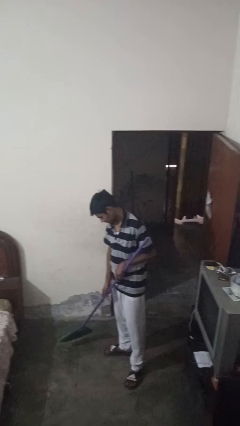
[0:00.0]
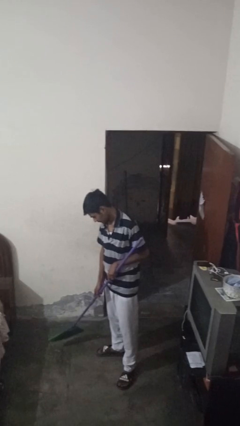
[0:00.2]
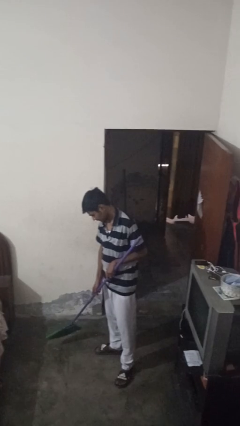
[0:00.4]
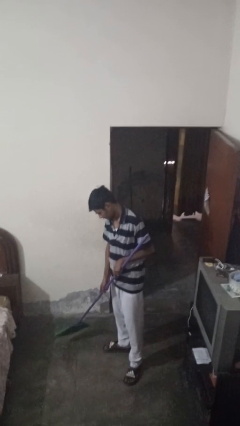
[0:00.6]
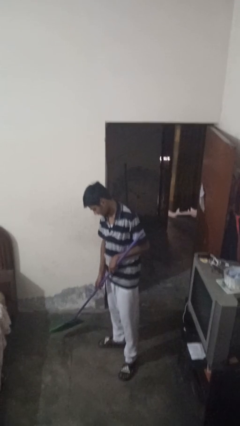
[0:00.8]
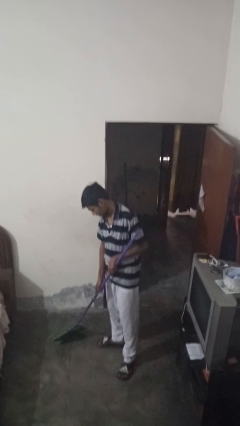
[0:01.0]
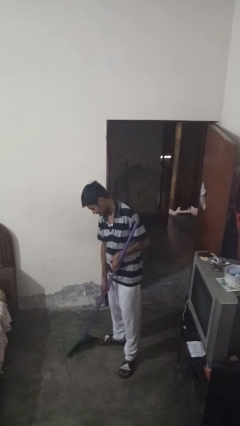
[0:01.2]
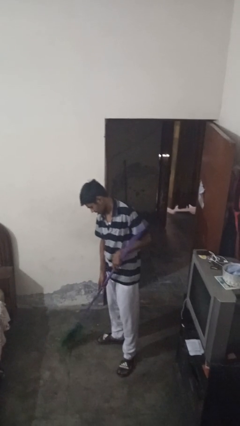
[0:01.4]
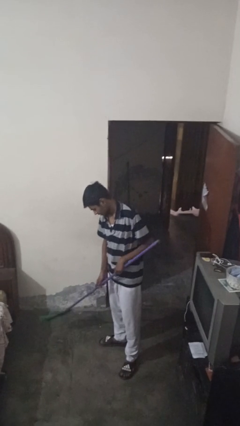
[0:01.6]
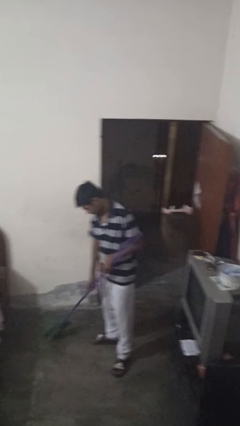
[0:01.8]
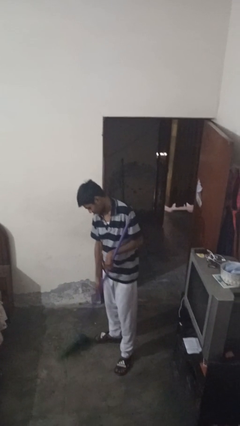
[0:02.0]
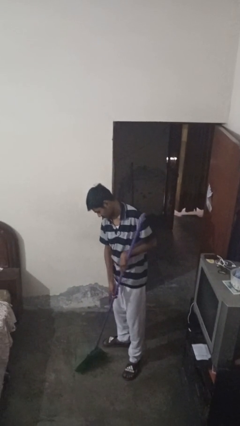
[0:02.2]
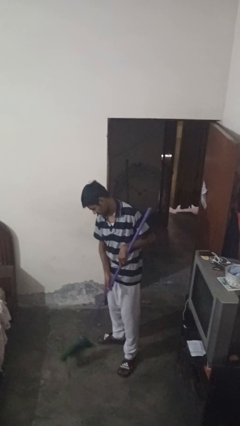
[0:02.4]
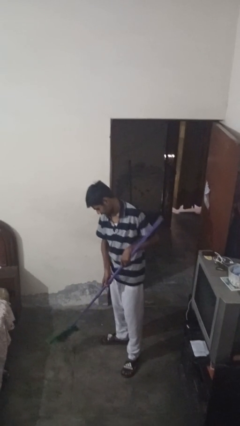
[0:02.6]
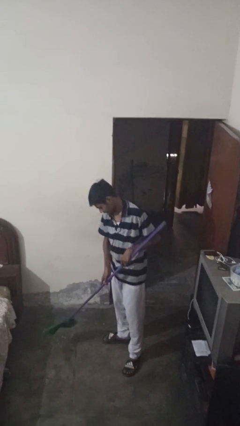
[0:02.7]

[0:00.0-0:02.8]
person sweeps floor

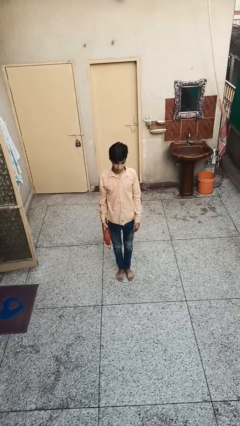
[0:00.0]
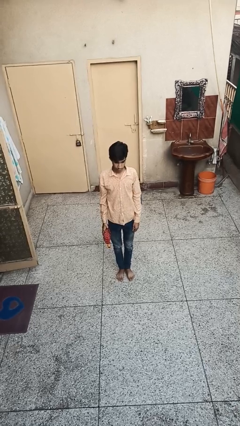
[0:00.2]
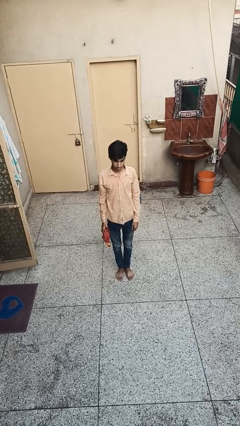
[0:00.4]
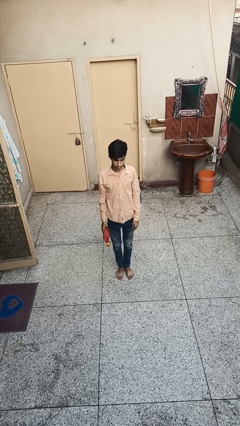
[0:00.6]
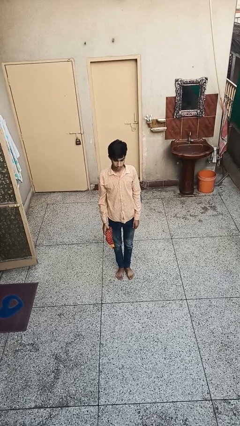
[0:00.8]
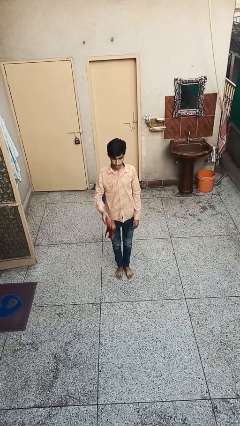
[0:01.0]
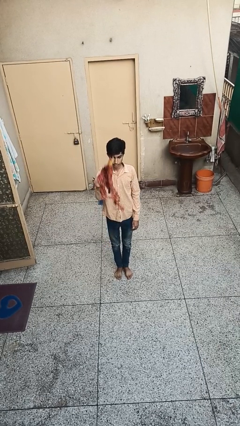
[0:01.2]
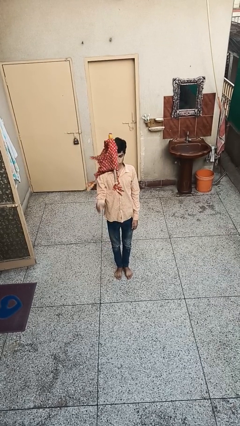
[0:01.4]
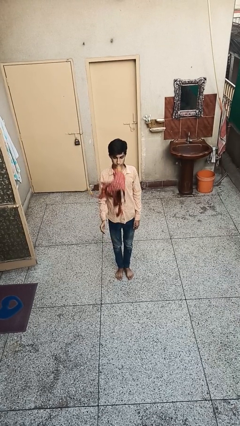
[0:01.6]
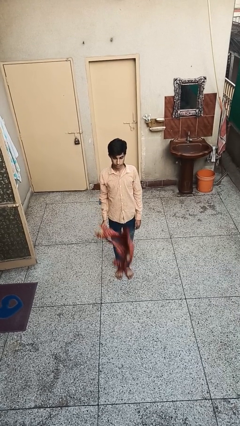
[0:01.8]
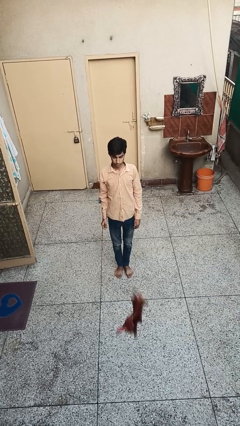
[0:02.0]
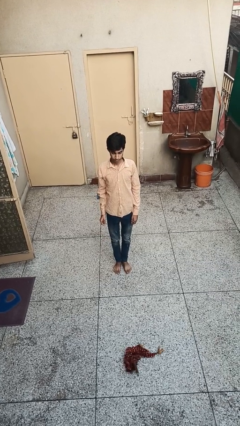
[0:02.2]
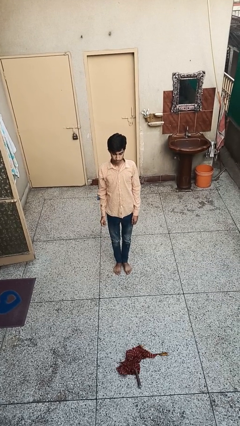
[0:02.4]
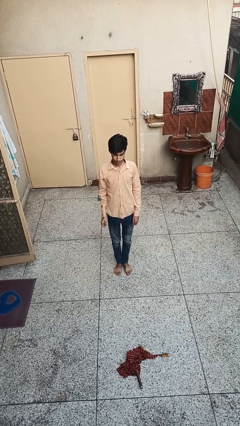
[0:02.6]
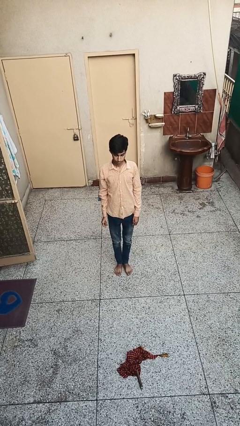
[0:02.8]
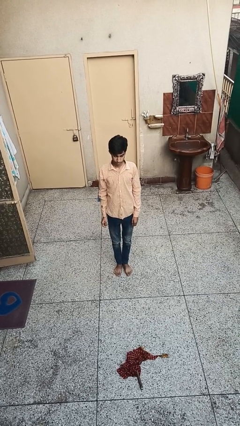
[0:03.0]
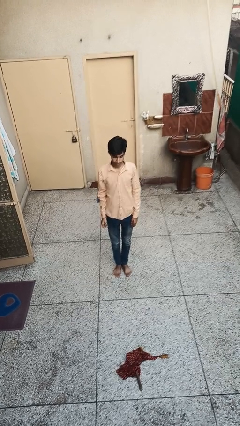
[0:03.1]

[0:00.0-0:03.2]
person throws object into air

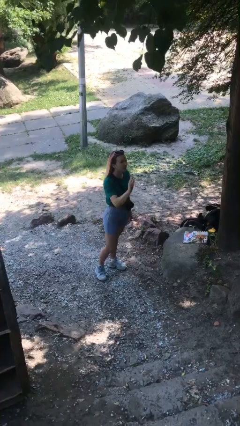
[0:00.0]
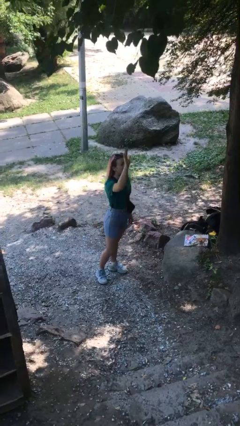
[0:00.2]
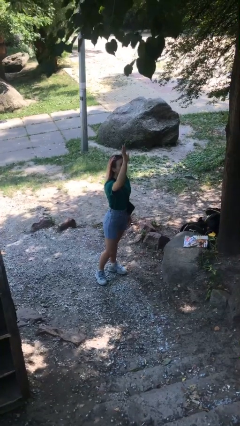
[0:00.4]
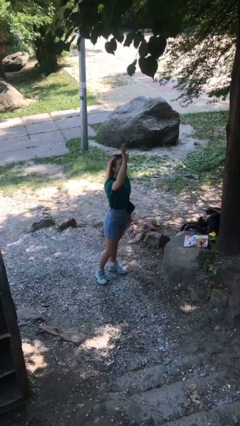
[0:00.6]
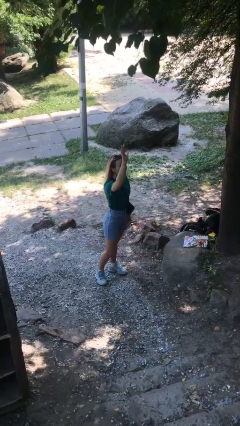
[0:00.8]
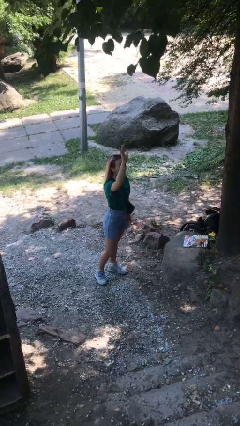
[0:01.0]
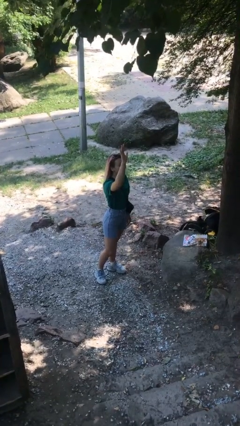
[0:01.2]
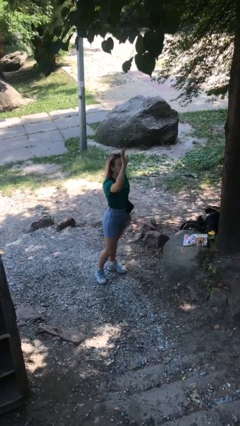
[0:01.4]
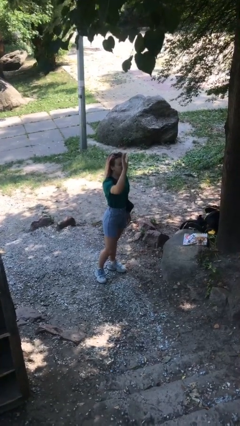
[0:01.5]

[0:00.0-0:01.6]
person gestures raise hand

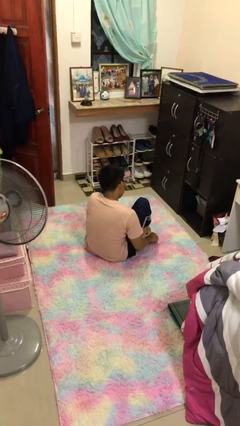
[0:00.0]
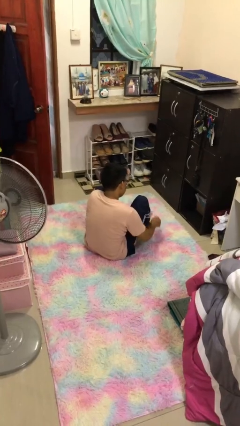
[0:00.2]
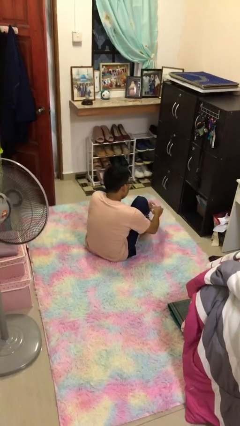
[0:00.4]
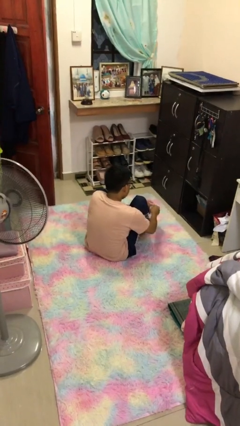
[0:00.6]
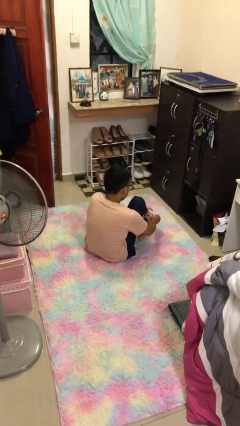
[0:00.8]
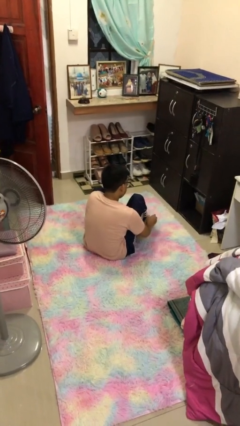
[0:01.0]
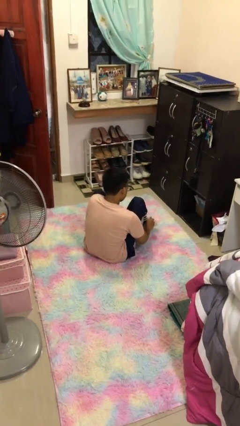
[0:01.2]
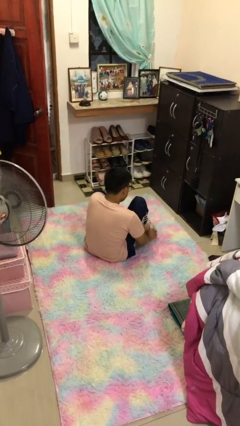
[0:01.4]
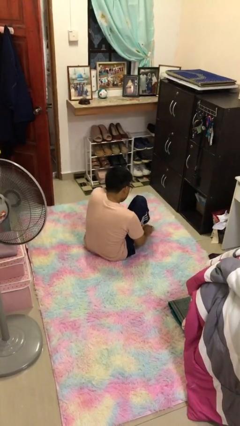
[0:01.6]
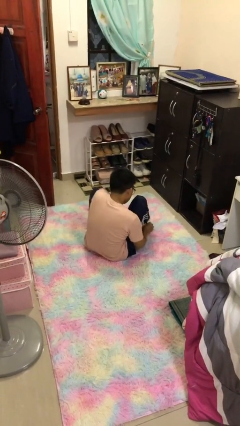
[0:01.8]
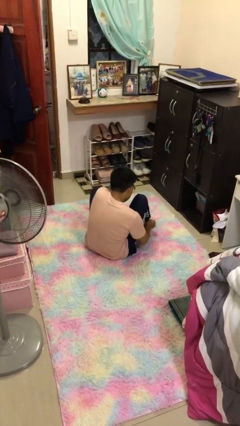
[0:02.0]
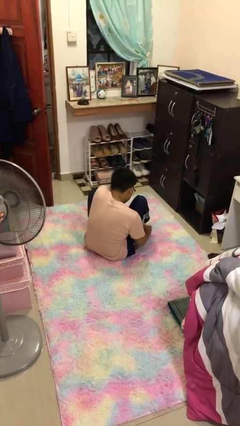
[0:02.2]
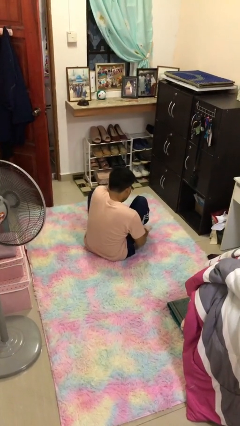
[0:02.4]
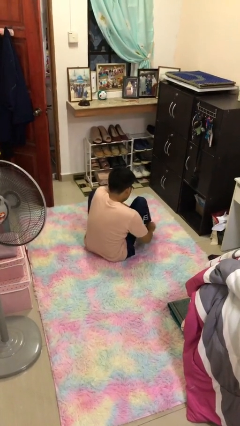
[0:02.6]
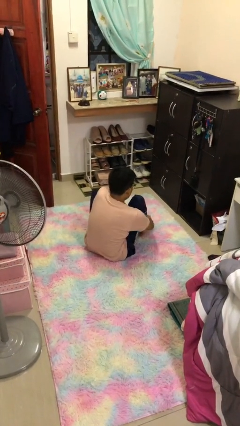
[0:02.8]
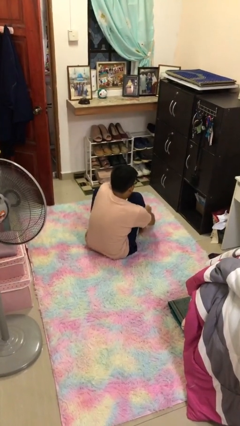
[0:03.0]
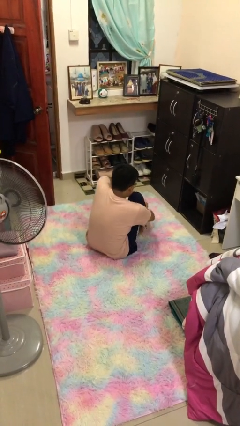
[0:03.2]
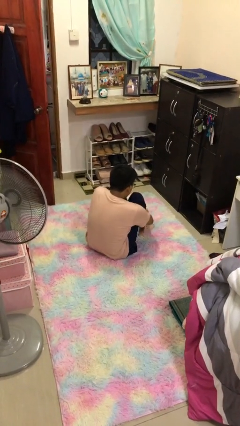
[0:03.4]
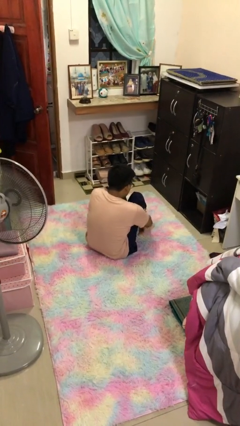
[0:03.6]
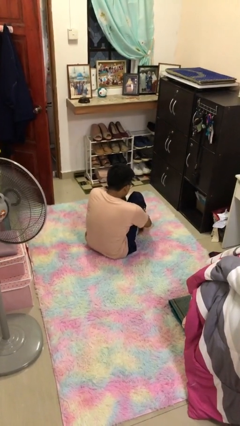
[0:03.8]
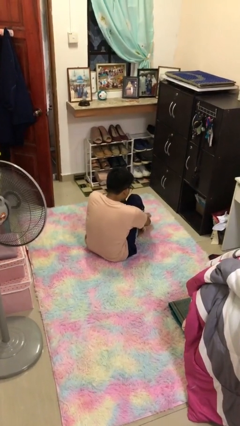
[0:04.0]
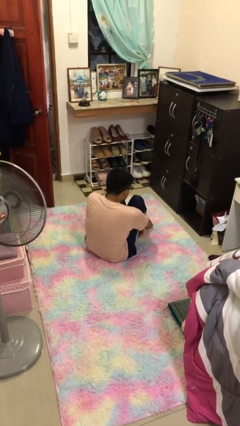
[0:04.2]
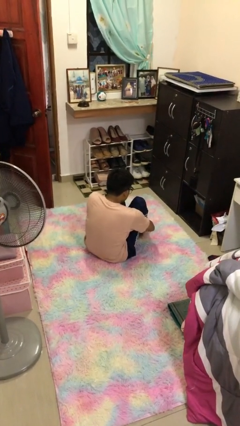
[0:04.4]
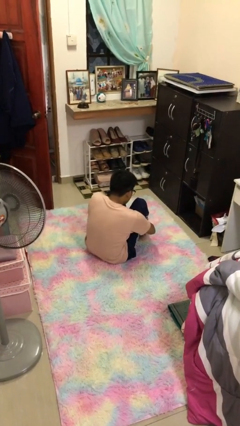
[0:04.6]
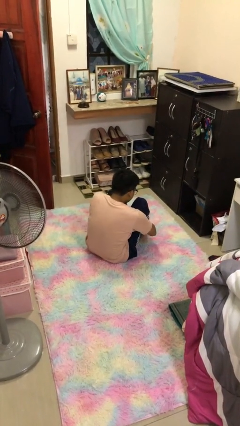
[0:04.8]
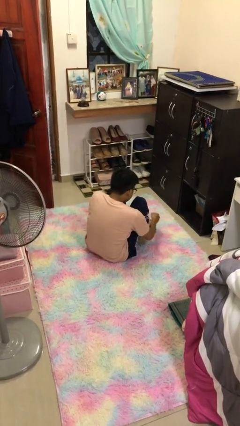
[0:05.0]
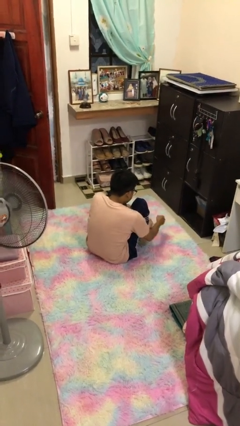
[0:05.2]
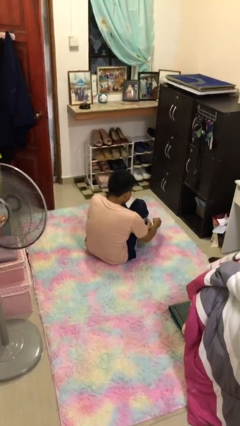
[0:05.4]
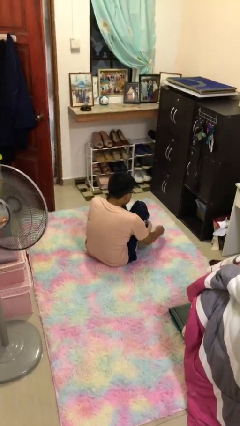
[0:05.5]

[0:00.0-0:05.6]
person puts on socks

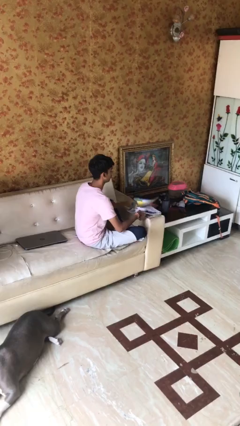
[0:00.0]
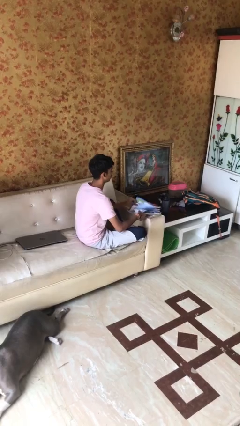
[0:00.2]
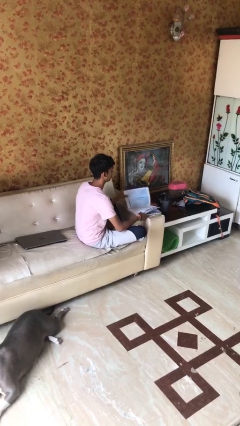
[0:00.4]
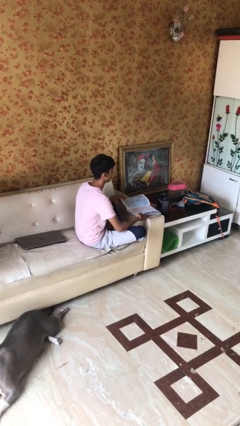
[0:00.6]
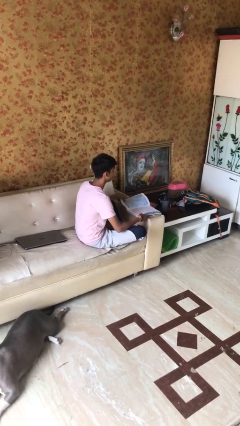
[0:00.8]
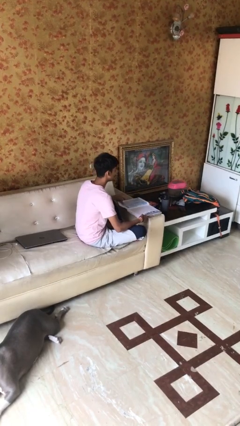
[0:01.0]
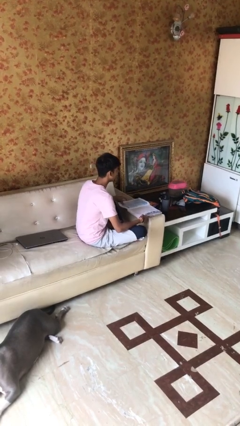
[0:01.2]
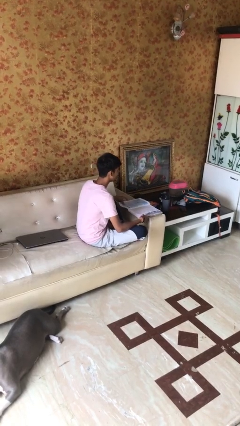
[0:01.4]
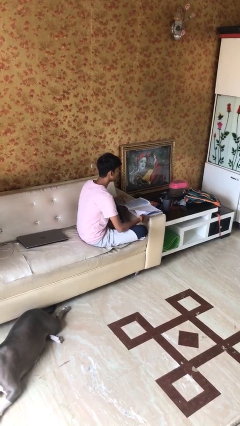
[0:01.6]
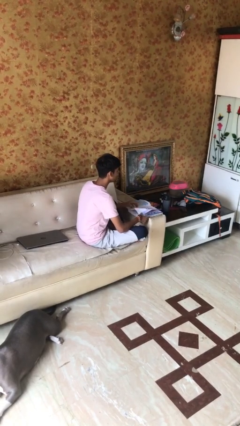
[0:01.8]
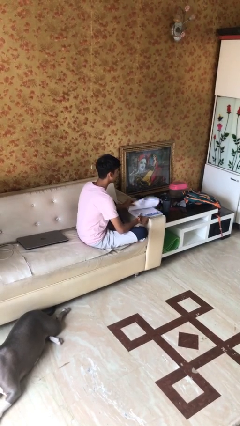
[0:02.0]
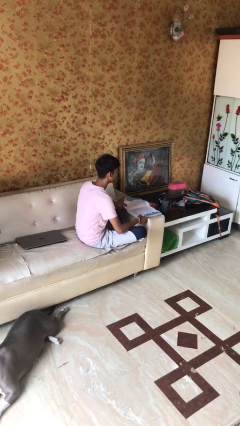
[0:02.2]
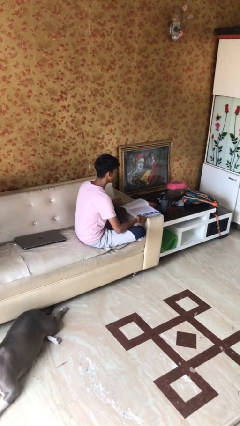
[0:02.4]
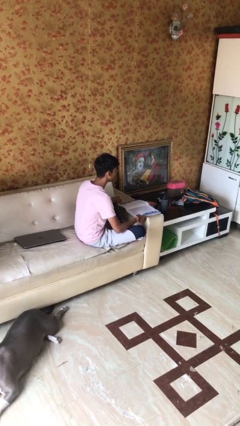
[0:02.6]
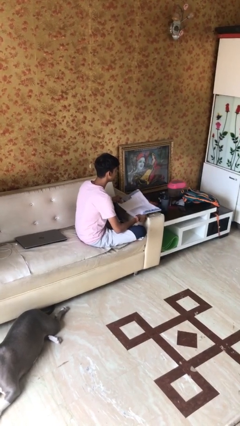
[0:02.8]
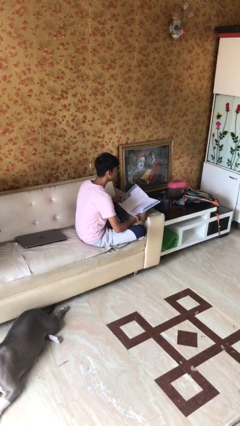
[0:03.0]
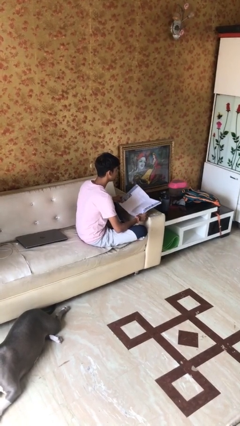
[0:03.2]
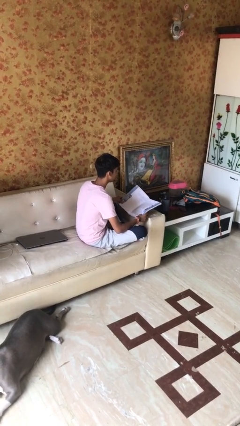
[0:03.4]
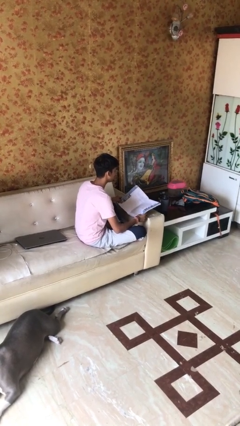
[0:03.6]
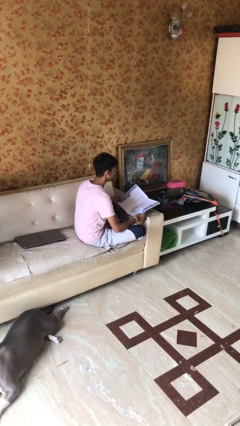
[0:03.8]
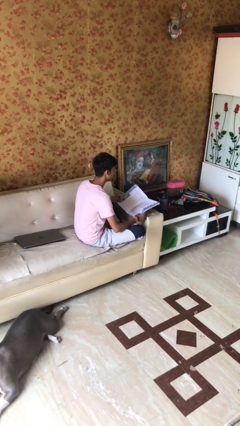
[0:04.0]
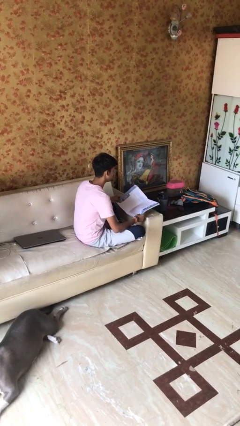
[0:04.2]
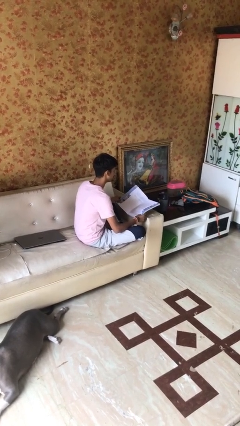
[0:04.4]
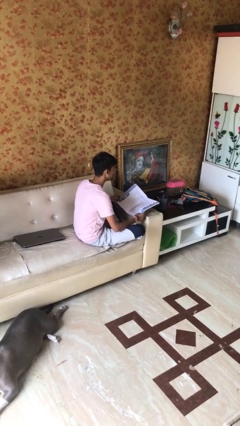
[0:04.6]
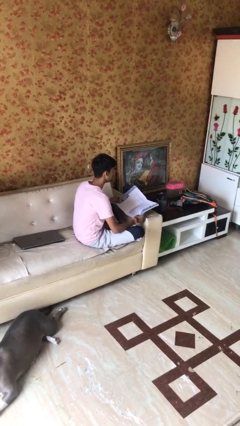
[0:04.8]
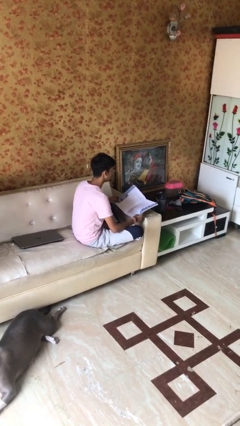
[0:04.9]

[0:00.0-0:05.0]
person reads magazine
